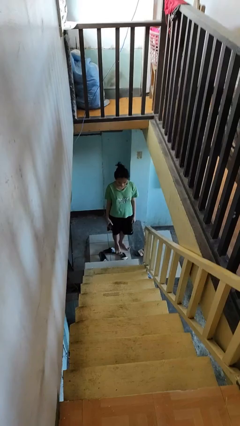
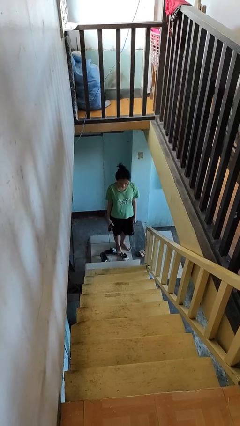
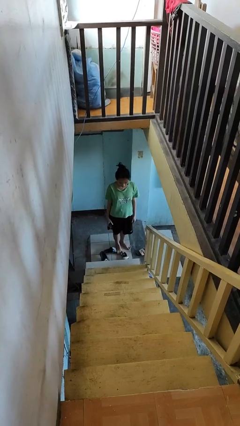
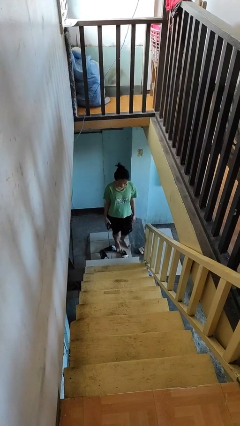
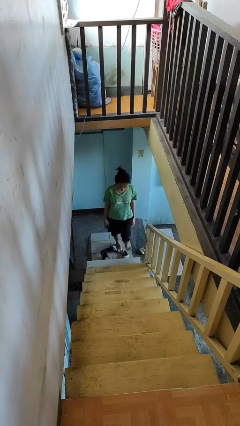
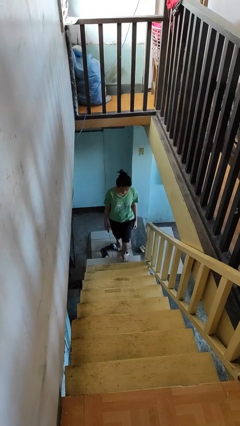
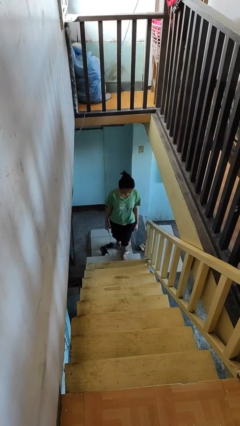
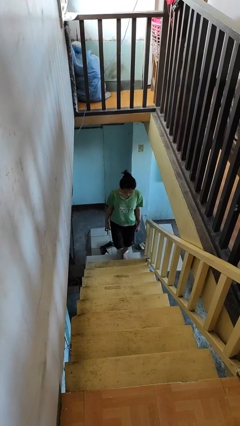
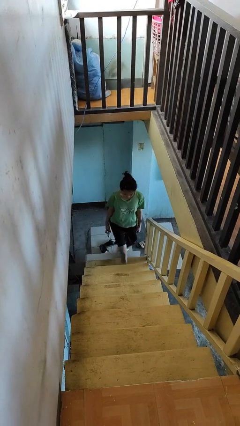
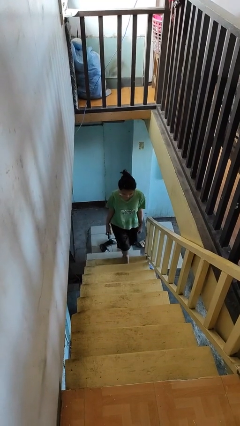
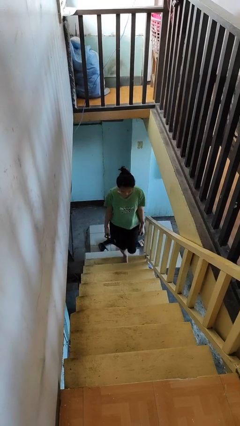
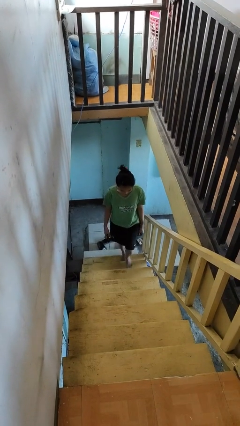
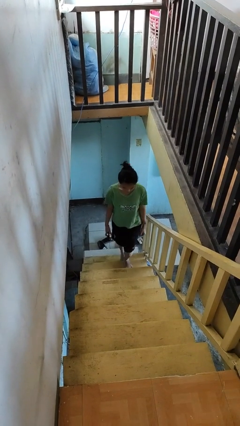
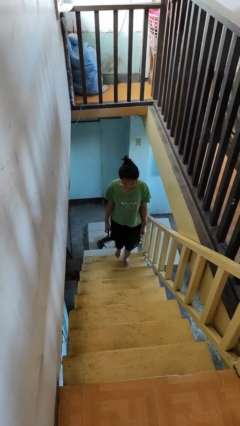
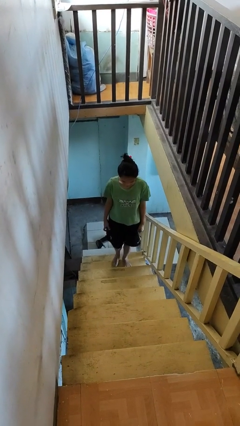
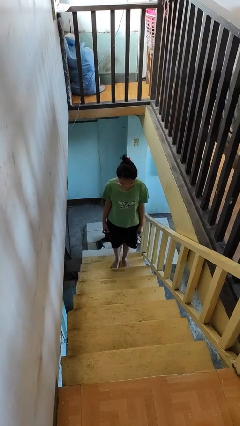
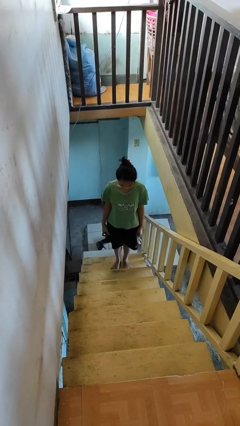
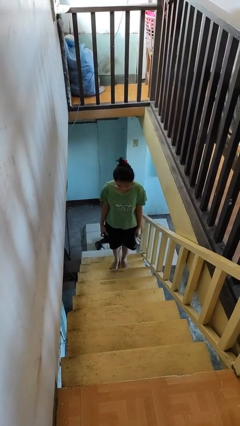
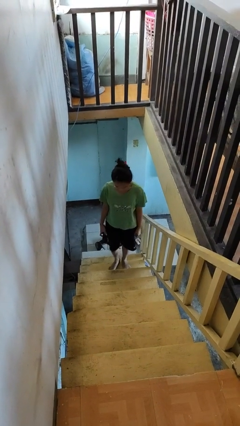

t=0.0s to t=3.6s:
person climbs up stairs

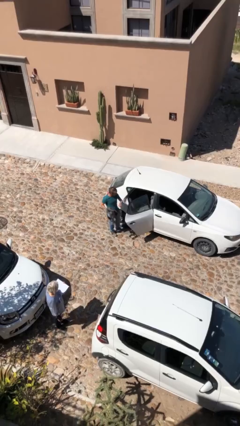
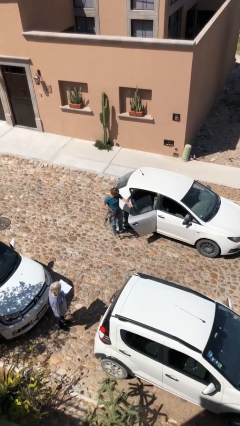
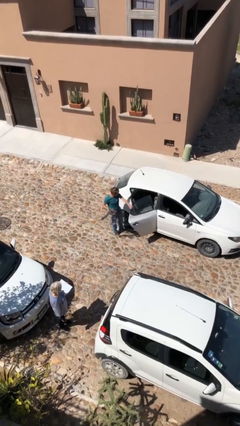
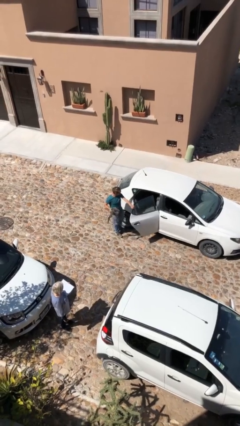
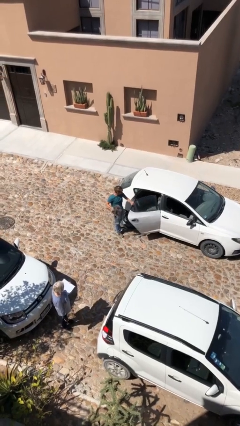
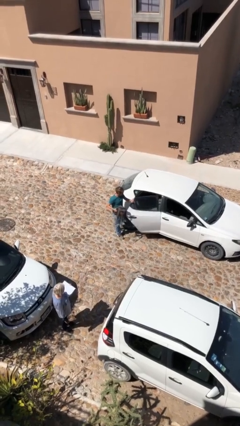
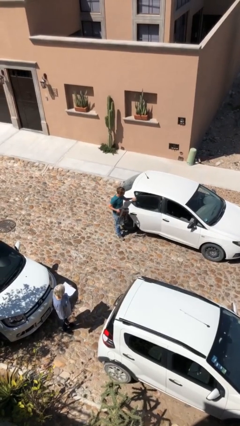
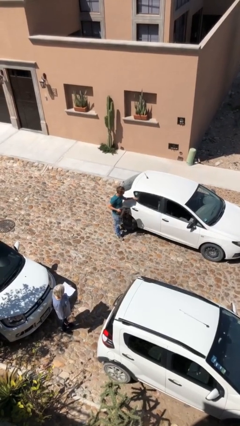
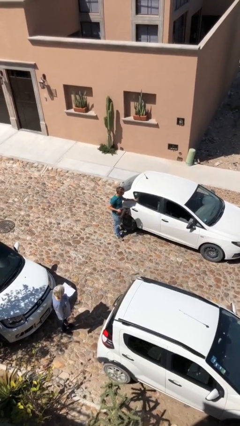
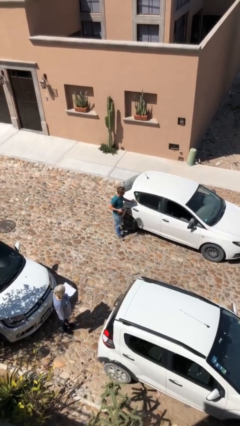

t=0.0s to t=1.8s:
person closes car door

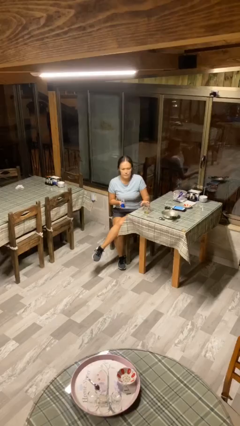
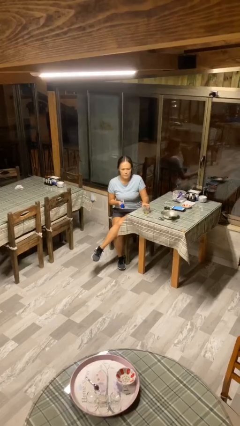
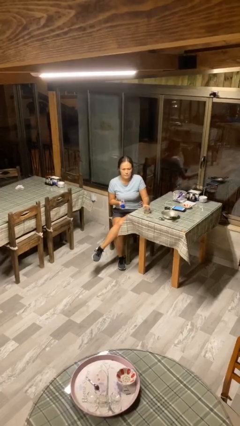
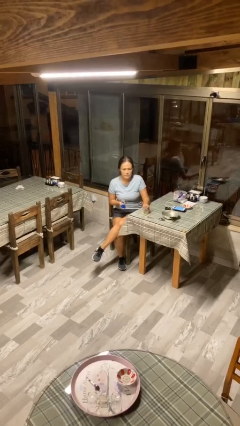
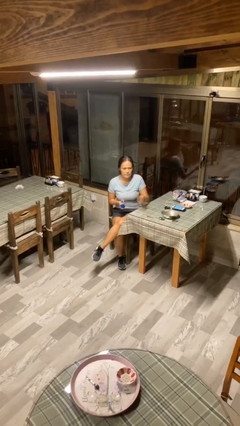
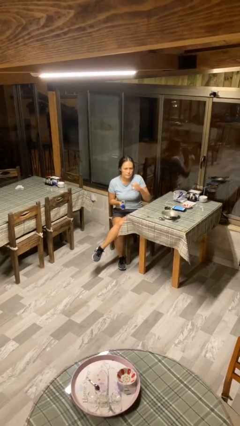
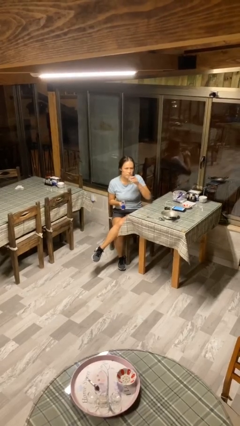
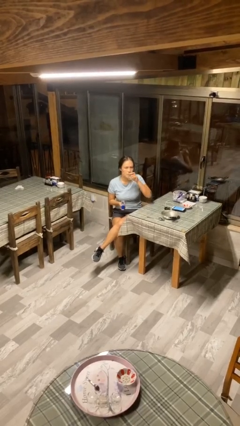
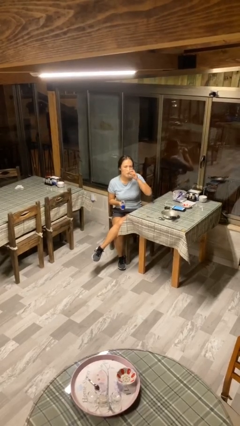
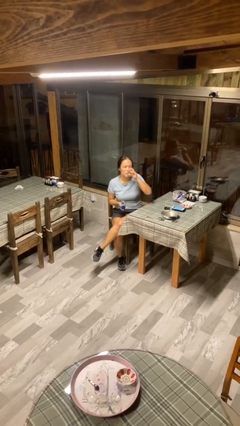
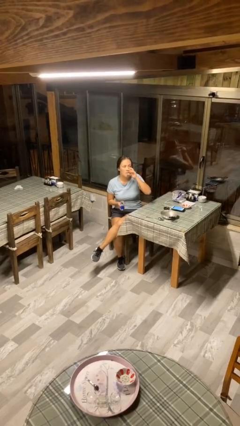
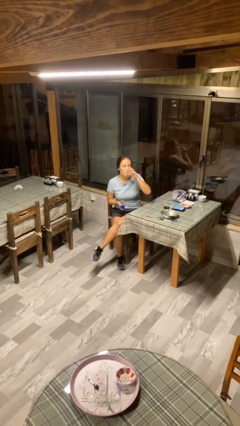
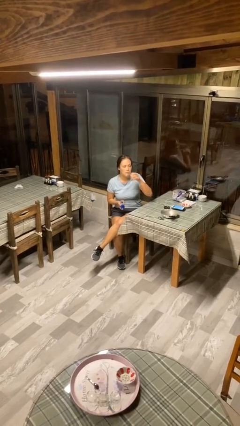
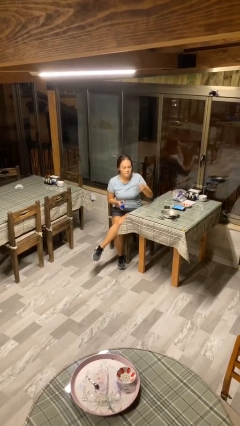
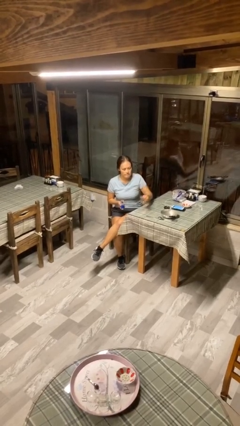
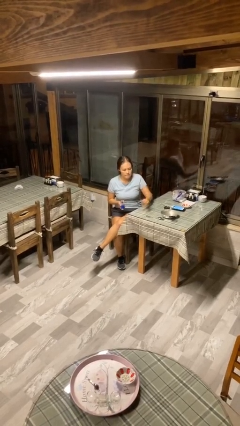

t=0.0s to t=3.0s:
person drinks from cup

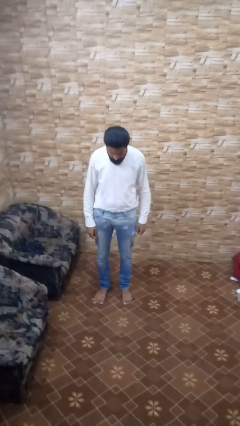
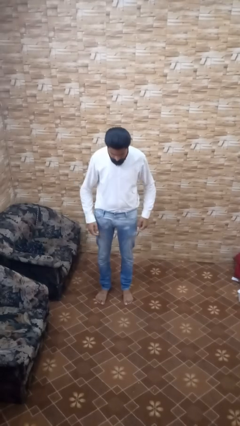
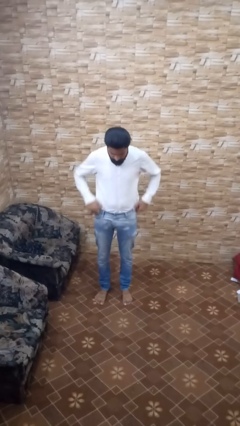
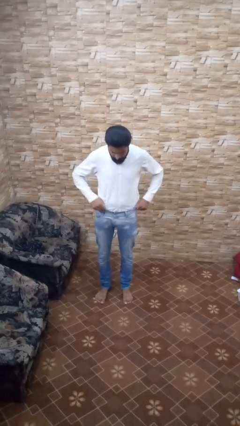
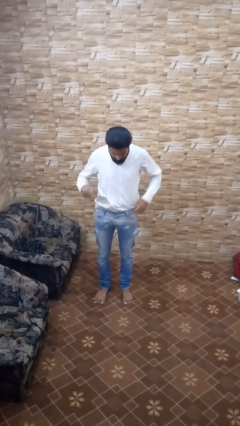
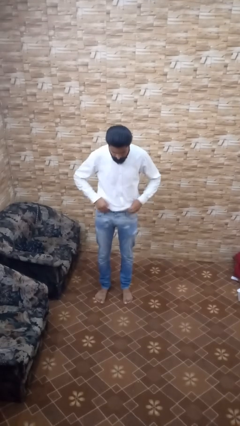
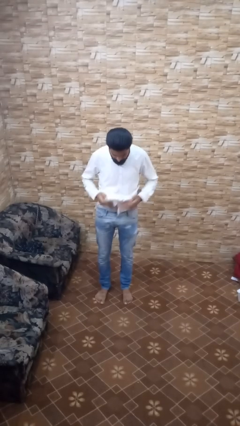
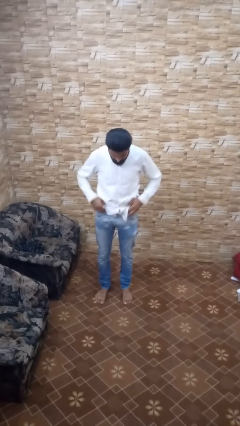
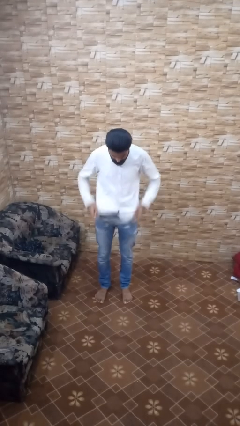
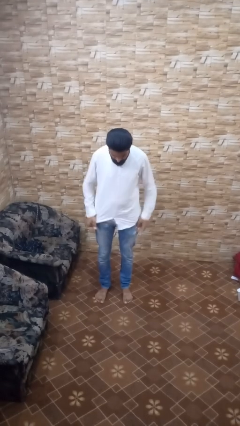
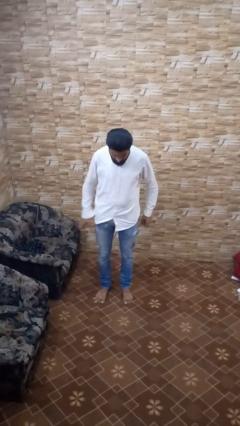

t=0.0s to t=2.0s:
person untucks shirt

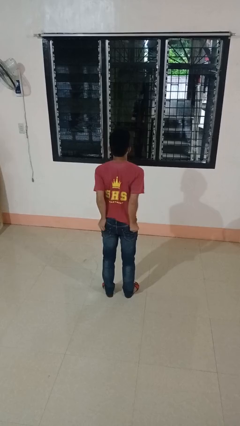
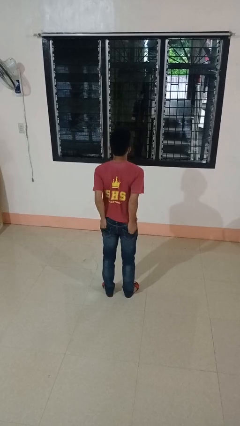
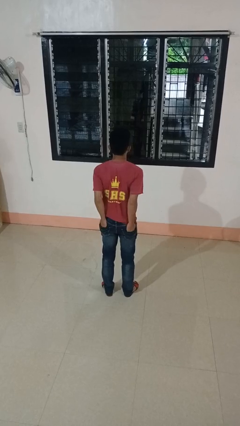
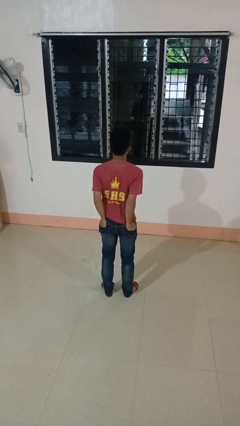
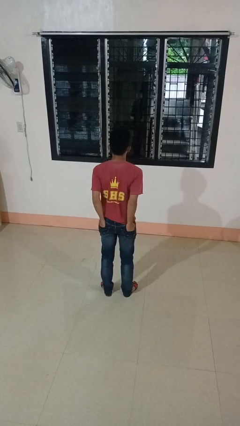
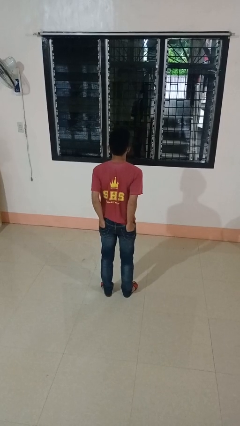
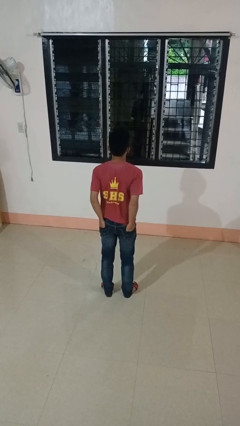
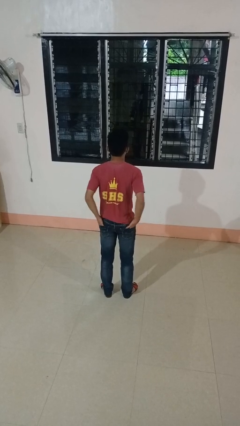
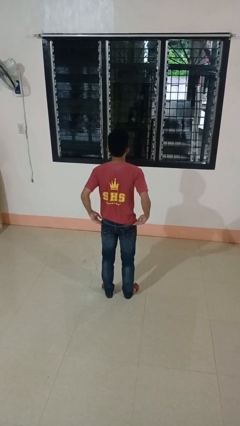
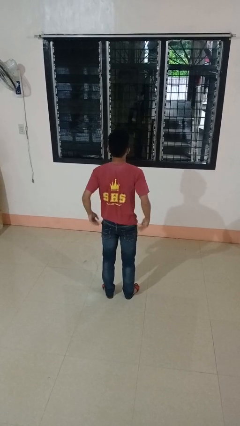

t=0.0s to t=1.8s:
person puts hands in back pockets

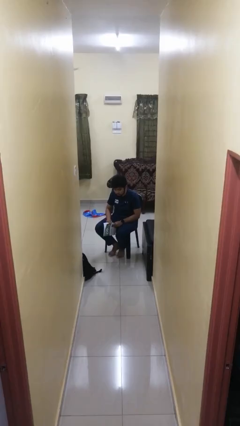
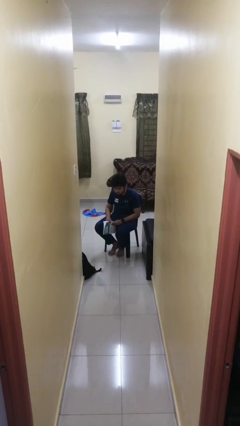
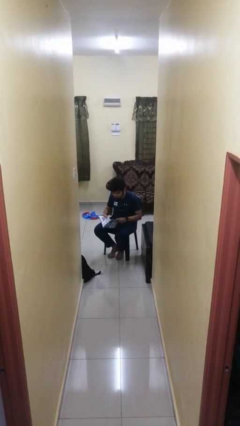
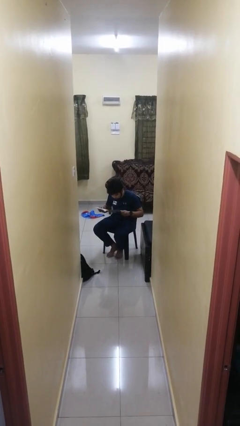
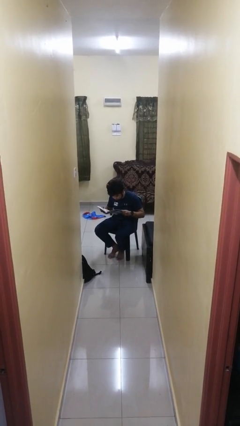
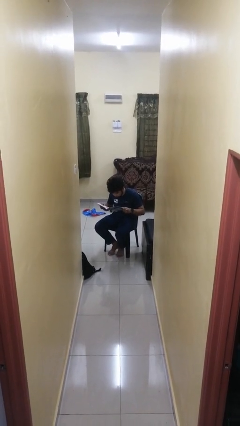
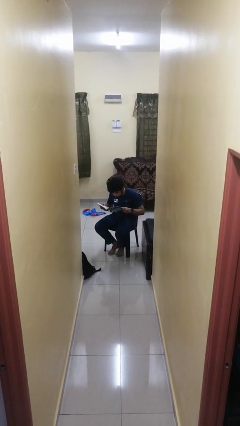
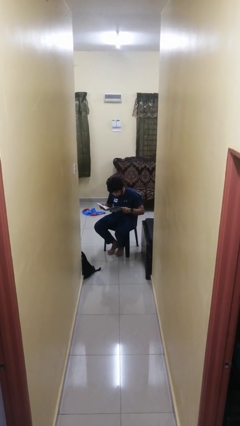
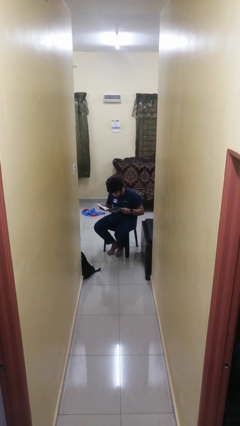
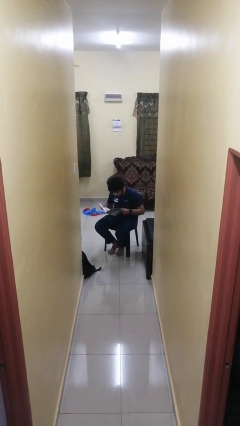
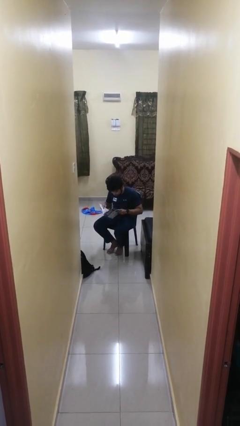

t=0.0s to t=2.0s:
person reads magazine

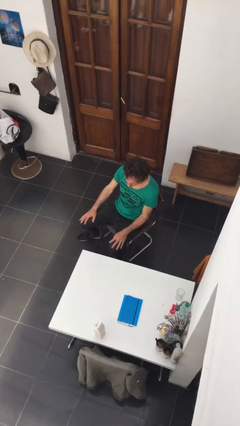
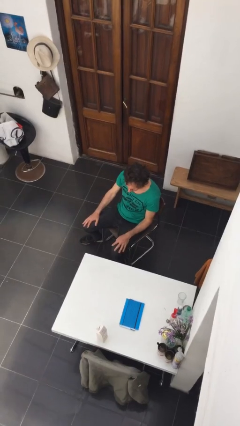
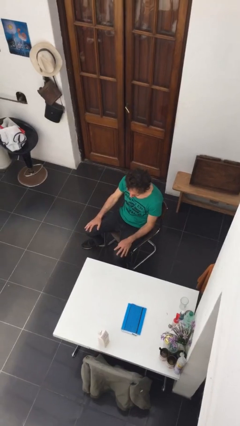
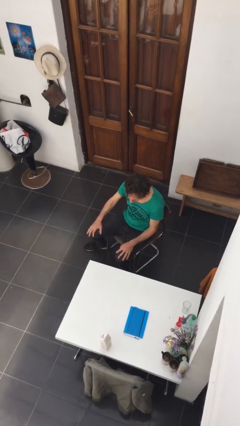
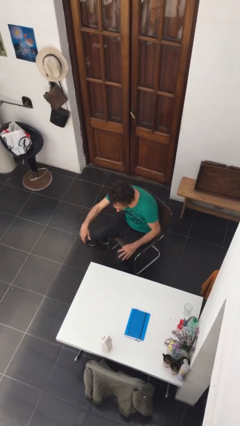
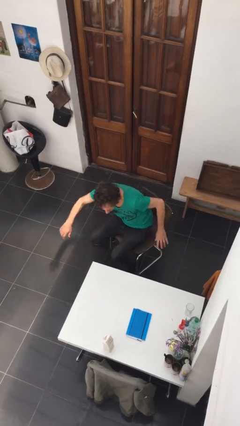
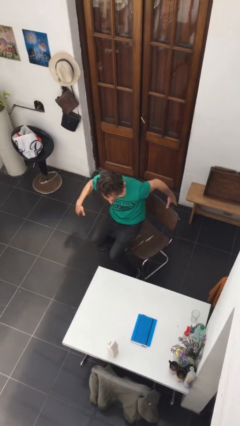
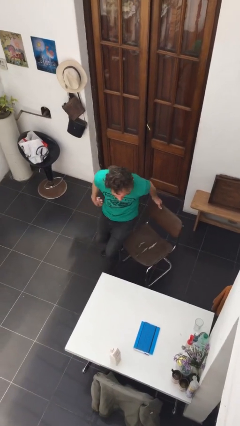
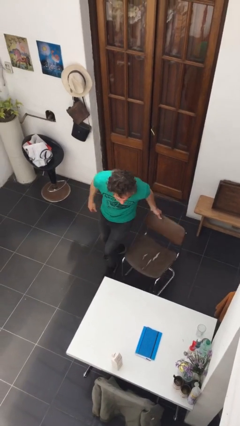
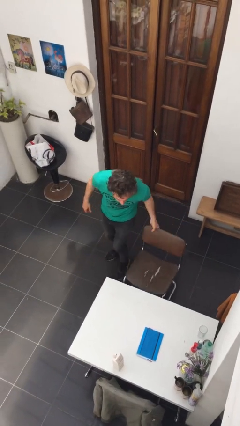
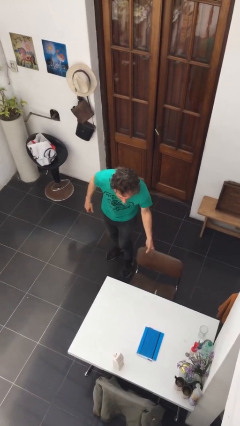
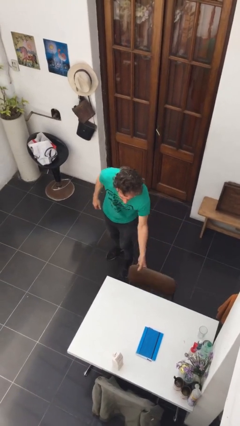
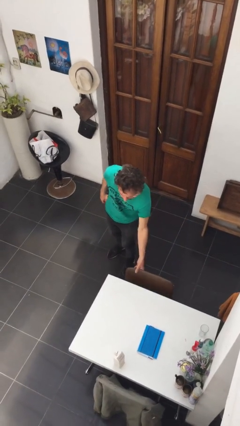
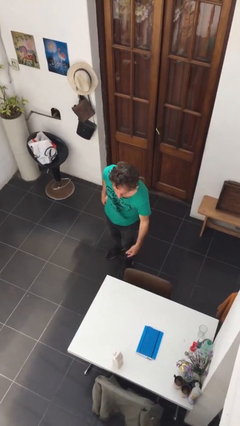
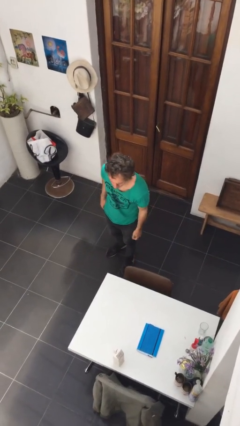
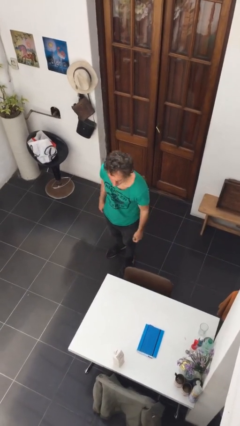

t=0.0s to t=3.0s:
person stands up
